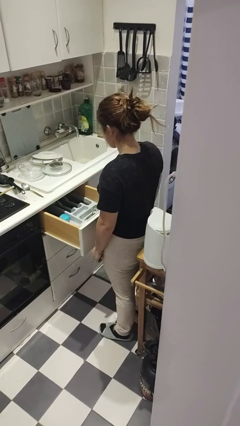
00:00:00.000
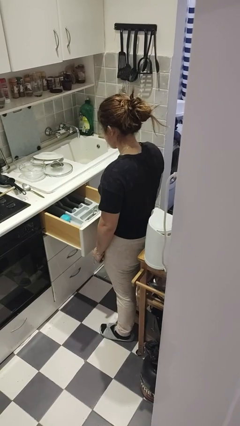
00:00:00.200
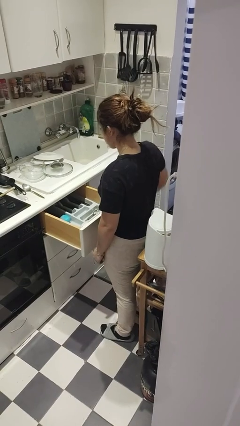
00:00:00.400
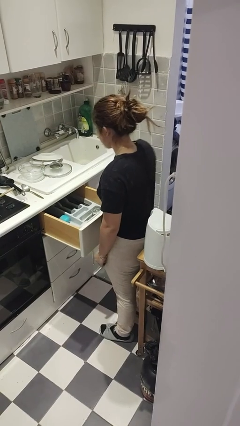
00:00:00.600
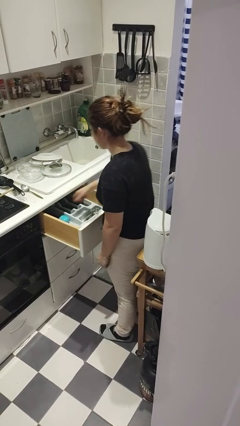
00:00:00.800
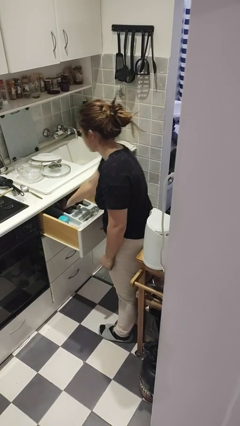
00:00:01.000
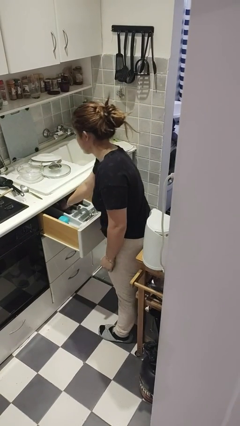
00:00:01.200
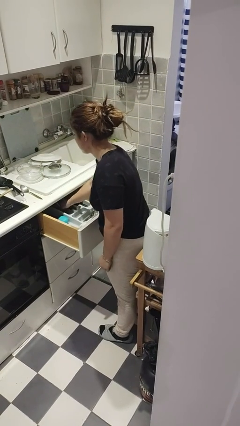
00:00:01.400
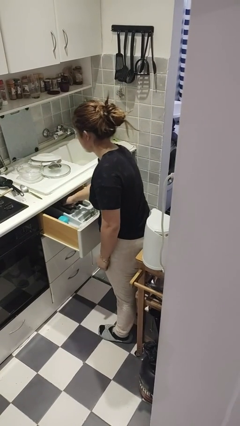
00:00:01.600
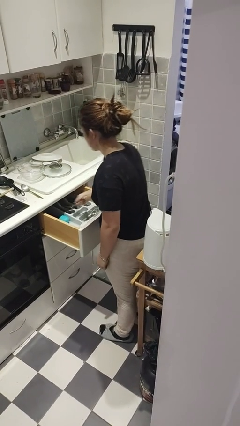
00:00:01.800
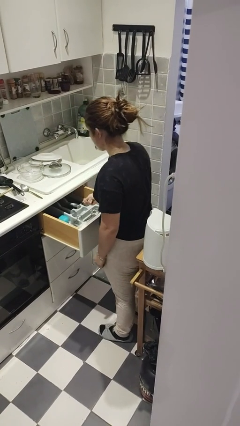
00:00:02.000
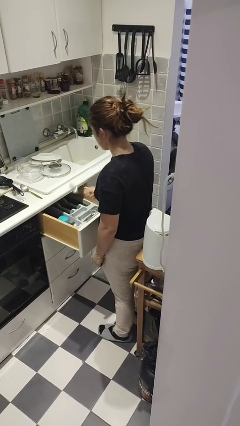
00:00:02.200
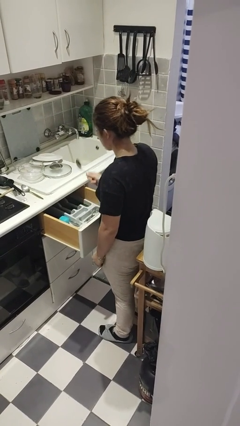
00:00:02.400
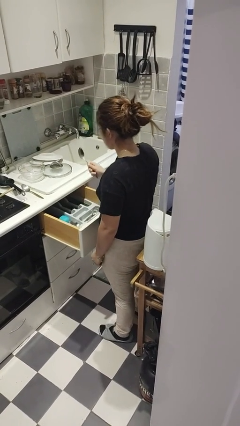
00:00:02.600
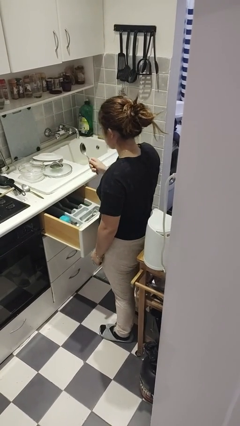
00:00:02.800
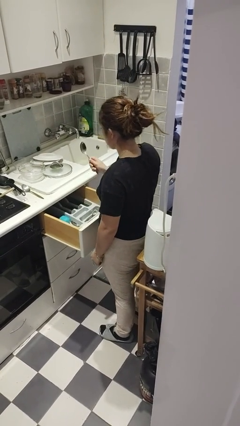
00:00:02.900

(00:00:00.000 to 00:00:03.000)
person takes object from kitchen drawer

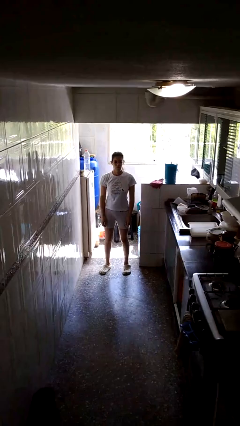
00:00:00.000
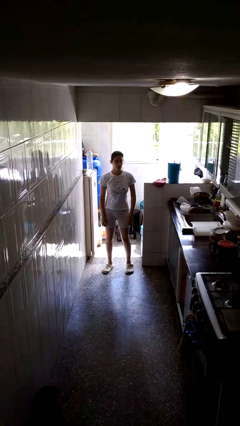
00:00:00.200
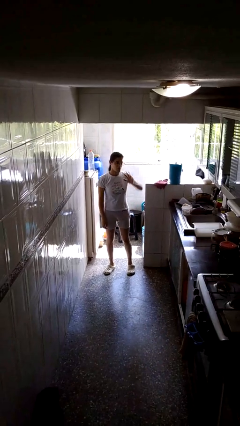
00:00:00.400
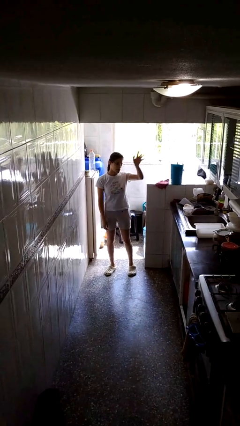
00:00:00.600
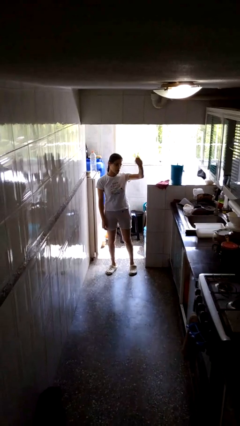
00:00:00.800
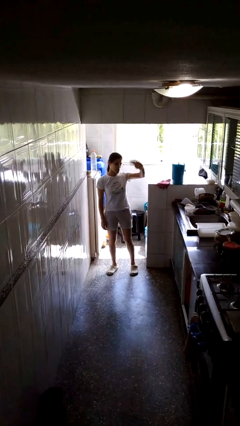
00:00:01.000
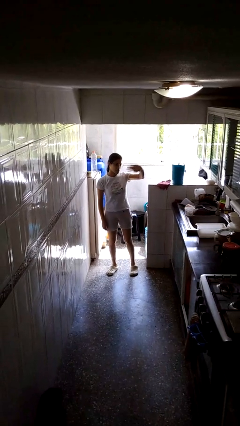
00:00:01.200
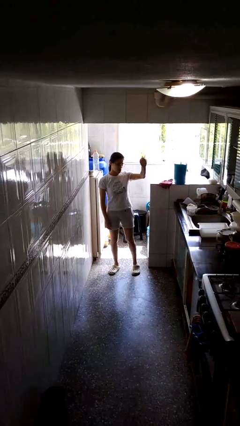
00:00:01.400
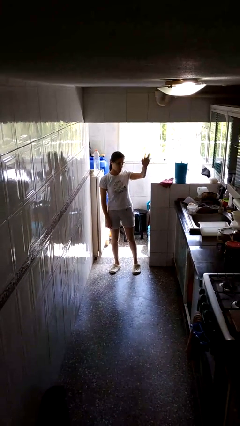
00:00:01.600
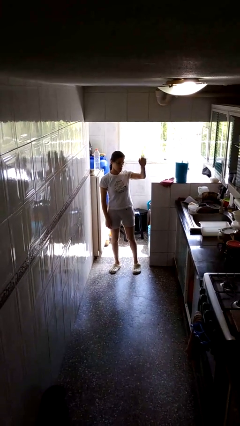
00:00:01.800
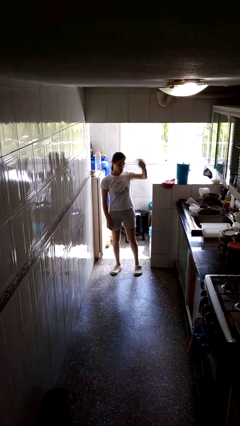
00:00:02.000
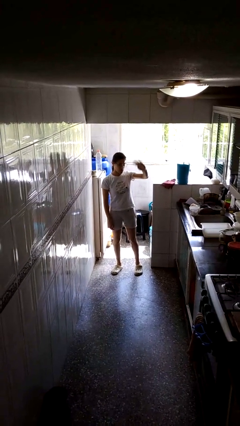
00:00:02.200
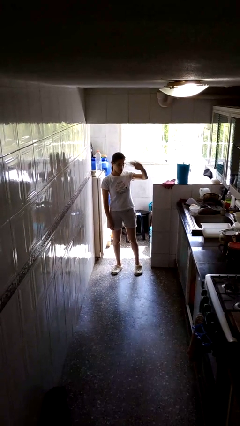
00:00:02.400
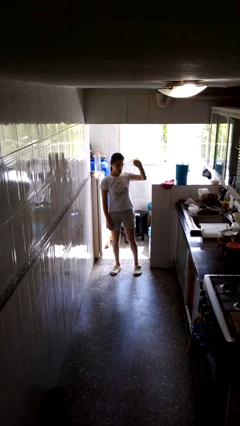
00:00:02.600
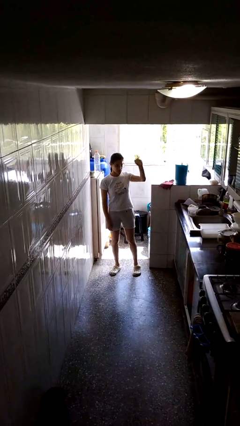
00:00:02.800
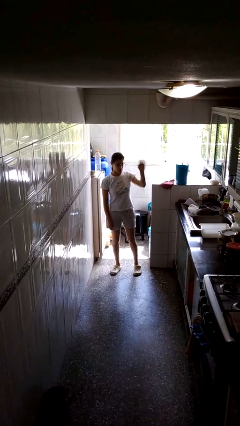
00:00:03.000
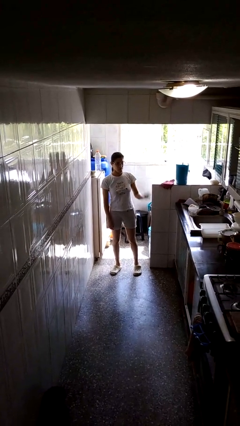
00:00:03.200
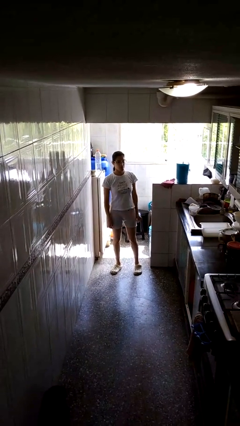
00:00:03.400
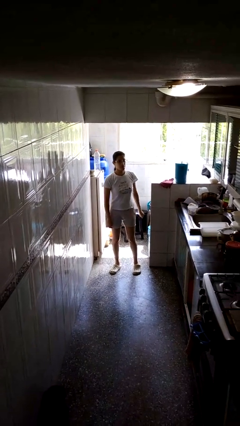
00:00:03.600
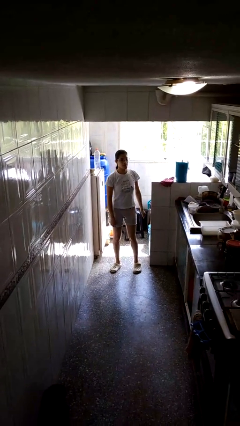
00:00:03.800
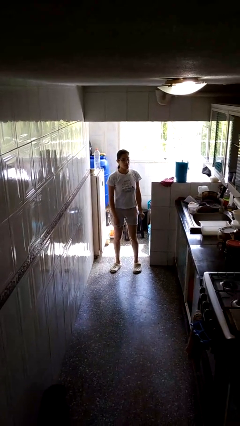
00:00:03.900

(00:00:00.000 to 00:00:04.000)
person waves at person

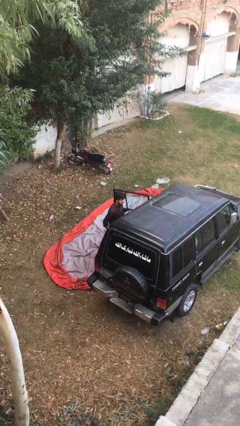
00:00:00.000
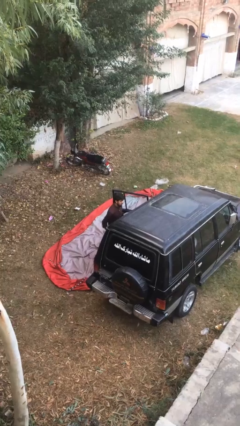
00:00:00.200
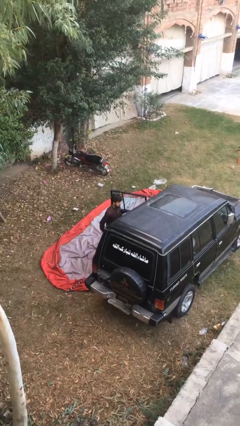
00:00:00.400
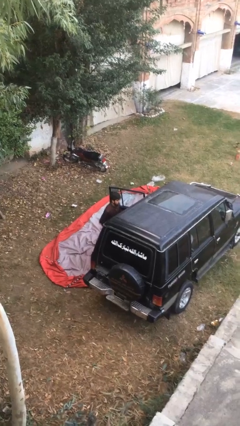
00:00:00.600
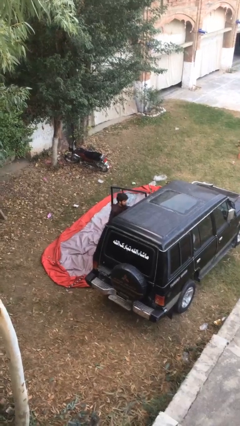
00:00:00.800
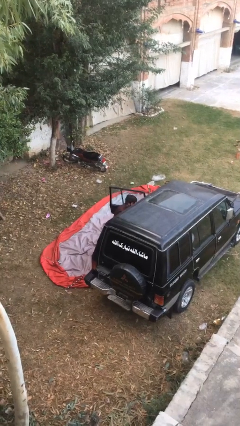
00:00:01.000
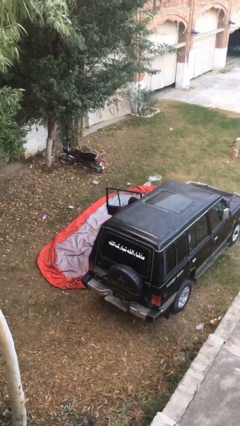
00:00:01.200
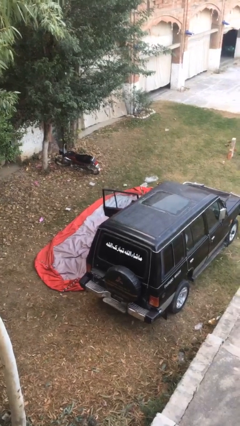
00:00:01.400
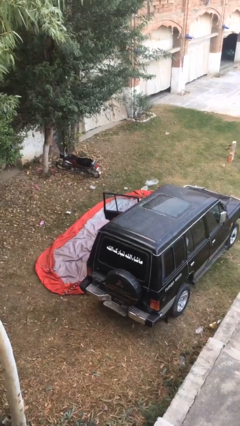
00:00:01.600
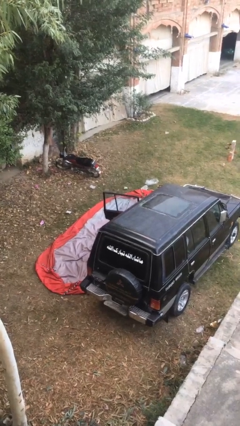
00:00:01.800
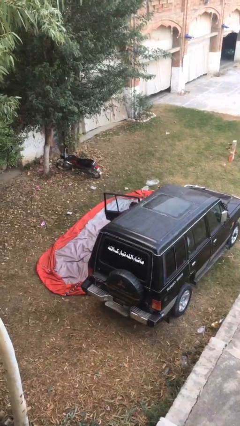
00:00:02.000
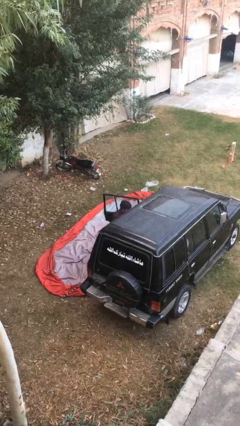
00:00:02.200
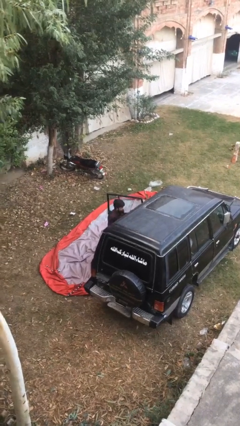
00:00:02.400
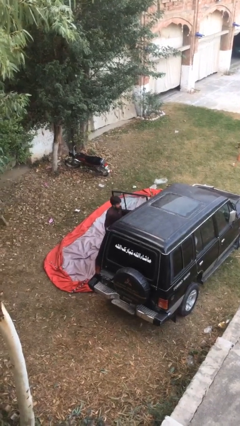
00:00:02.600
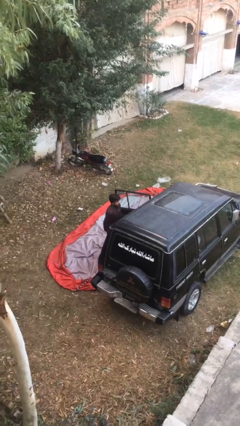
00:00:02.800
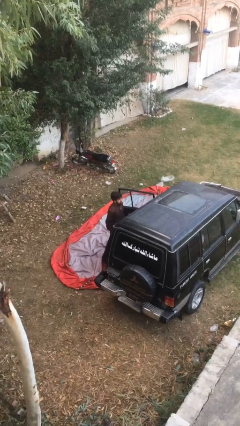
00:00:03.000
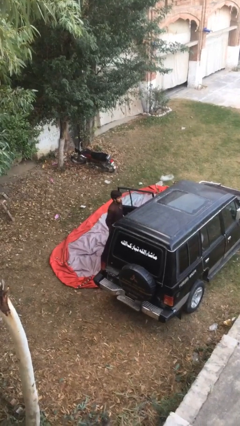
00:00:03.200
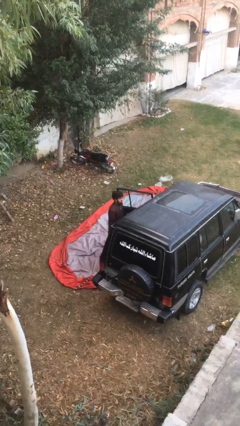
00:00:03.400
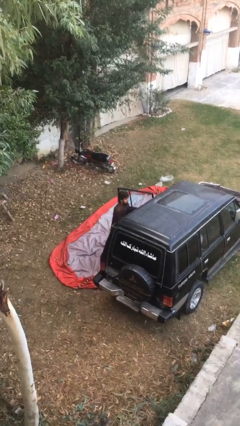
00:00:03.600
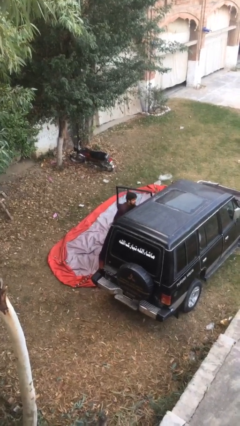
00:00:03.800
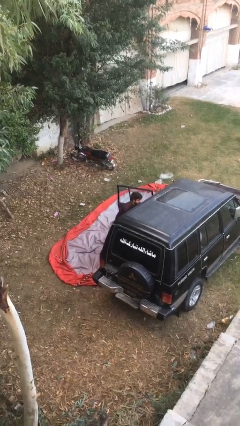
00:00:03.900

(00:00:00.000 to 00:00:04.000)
person loads car

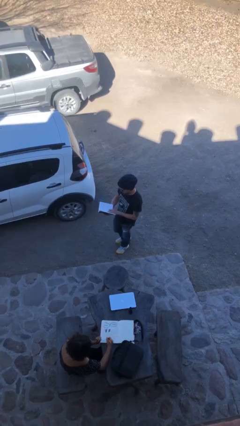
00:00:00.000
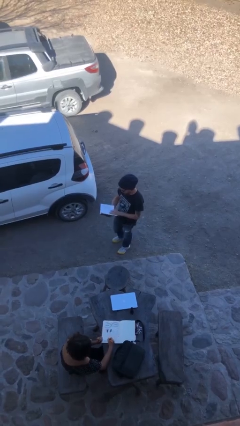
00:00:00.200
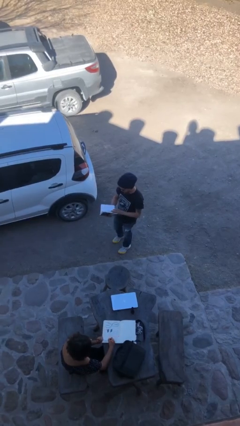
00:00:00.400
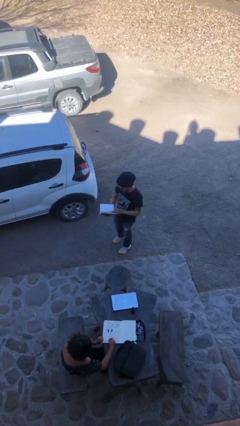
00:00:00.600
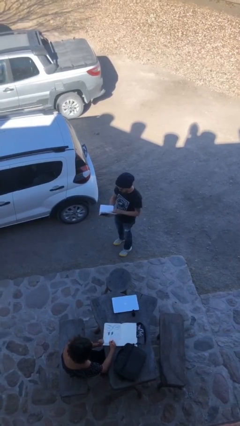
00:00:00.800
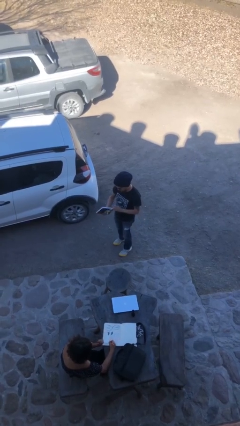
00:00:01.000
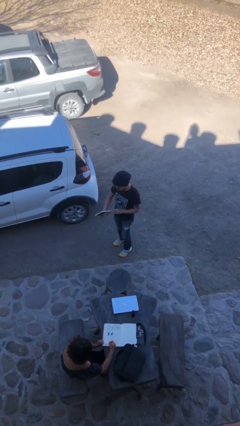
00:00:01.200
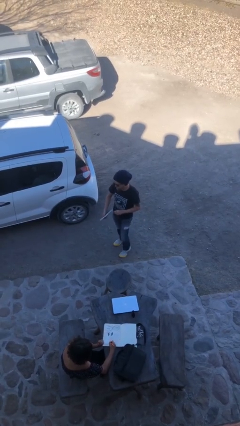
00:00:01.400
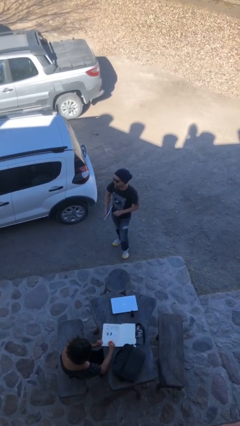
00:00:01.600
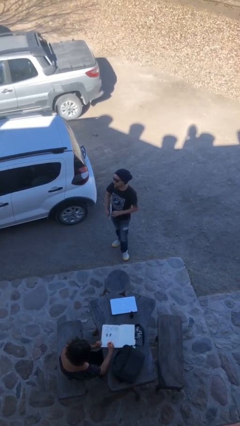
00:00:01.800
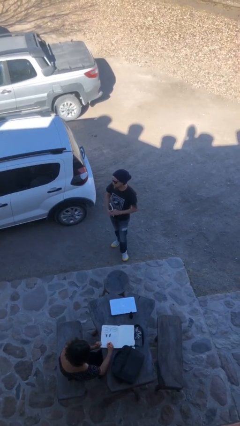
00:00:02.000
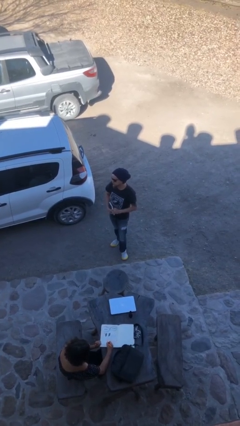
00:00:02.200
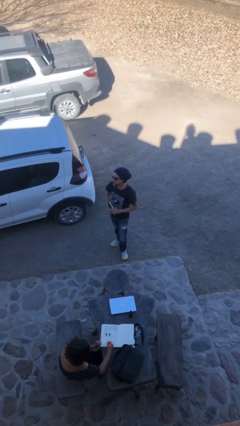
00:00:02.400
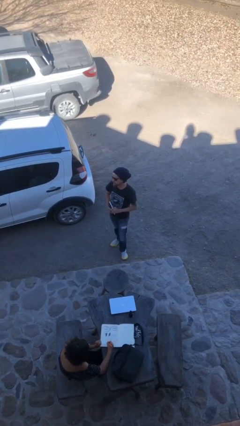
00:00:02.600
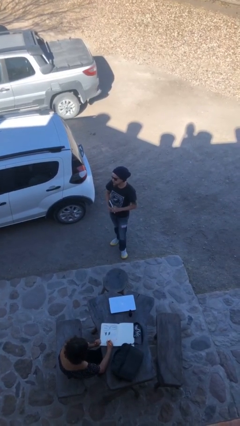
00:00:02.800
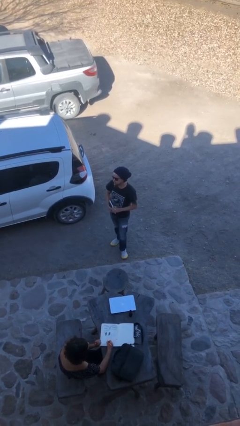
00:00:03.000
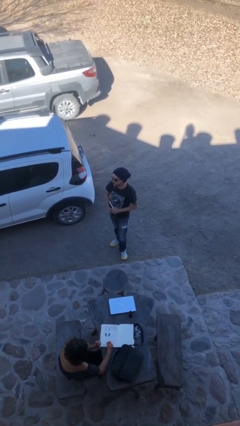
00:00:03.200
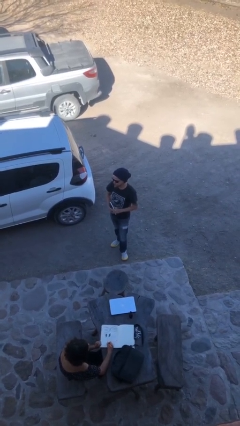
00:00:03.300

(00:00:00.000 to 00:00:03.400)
person reads document

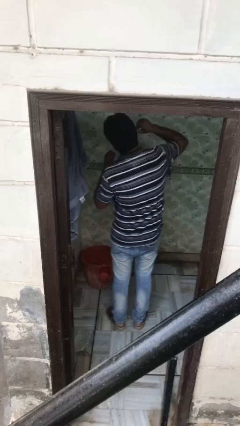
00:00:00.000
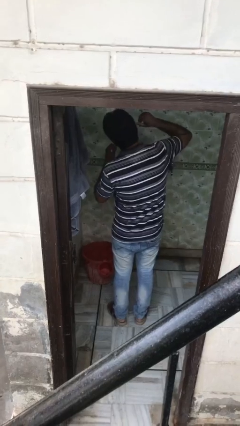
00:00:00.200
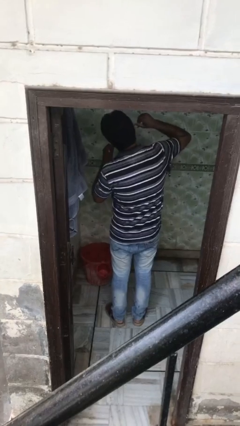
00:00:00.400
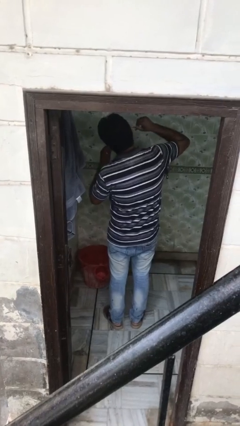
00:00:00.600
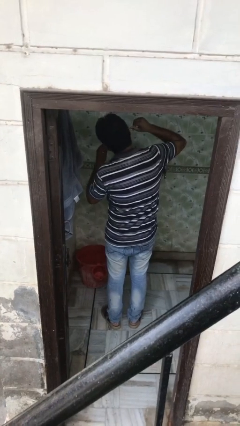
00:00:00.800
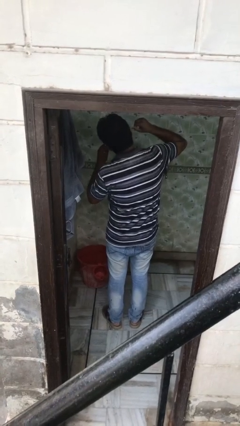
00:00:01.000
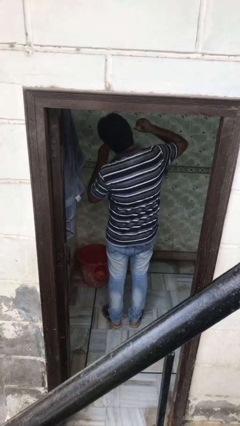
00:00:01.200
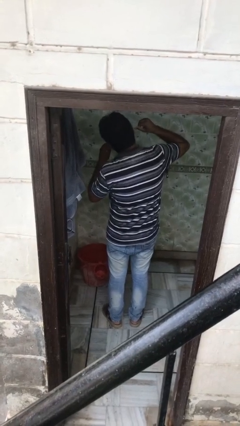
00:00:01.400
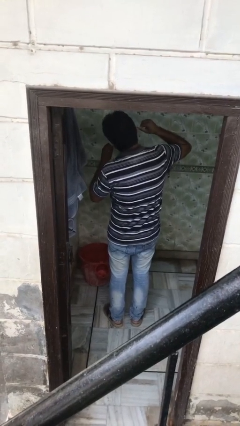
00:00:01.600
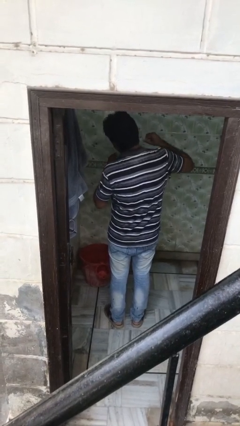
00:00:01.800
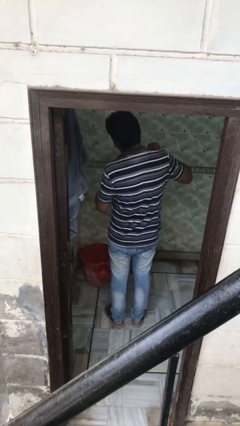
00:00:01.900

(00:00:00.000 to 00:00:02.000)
person flosses

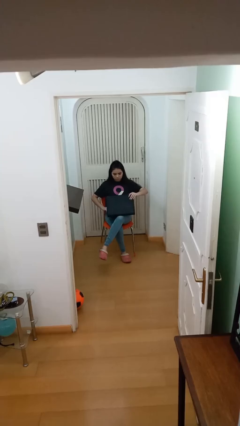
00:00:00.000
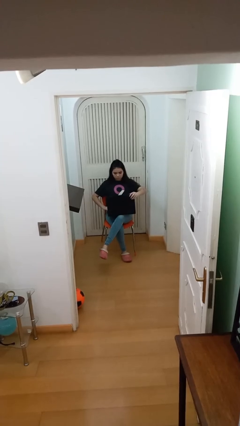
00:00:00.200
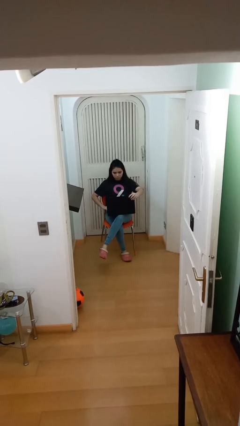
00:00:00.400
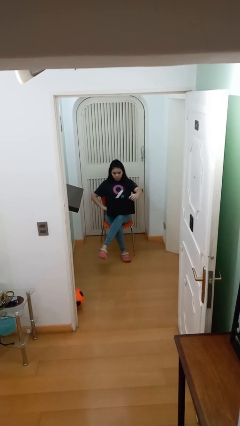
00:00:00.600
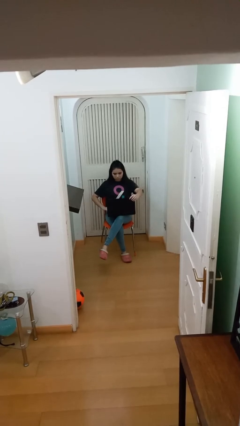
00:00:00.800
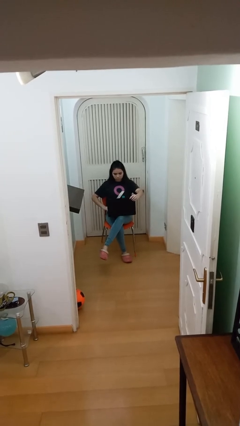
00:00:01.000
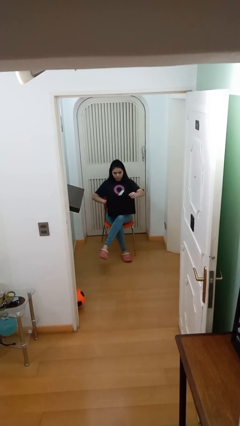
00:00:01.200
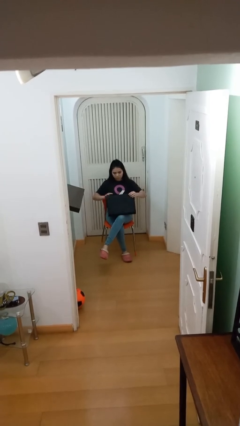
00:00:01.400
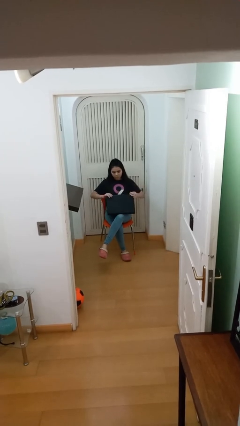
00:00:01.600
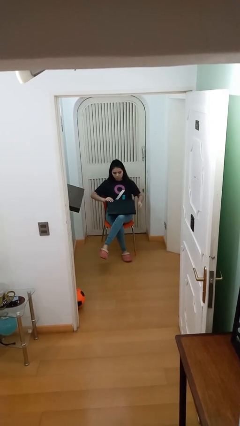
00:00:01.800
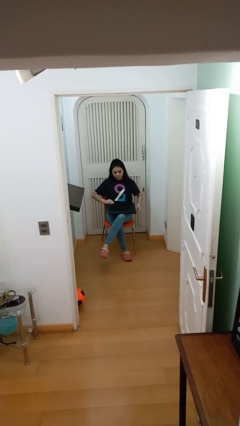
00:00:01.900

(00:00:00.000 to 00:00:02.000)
person interacts with laptop
